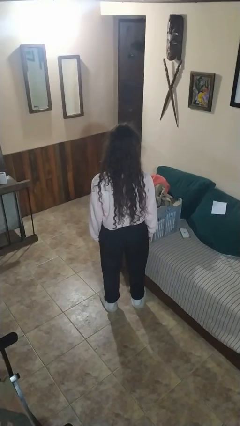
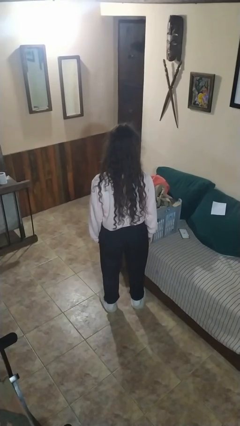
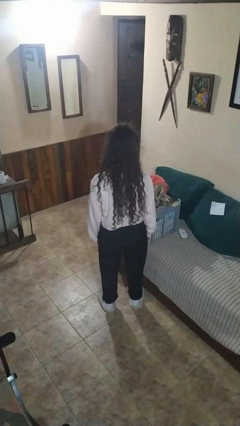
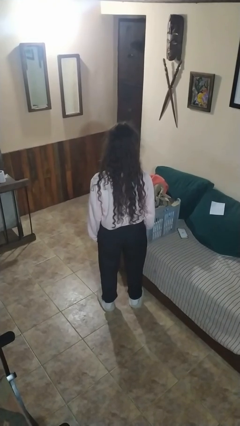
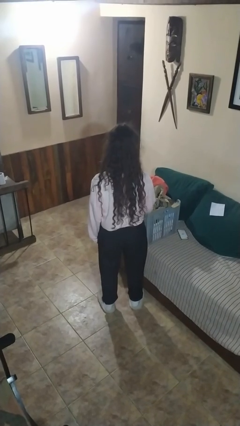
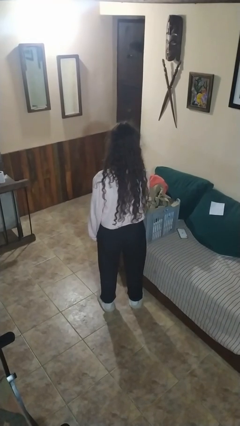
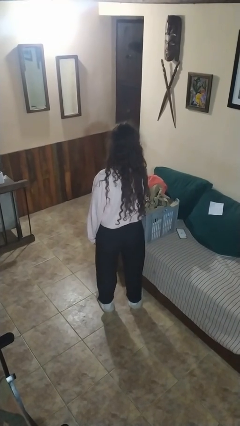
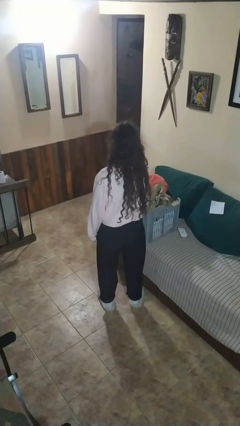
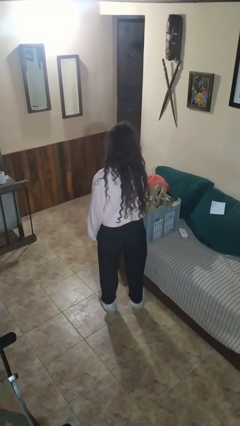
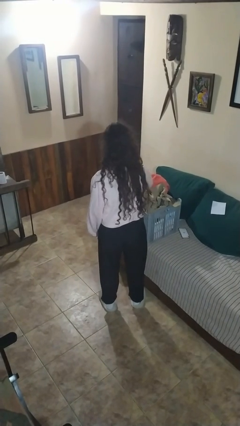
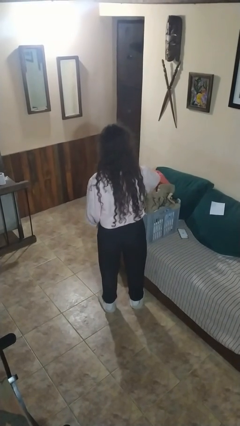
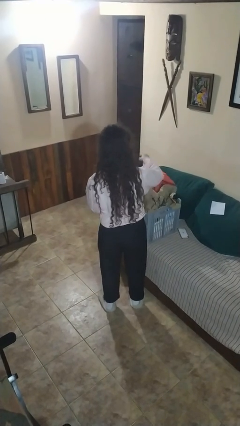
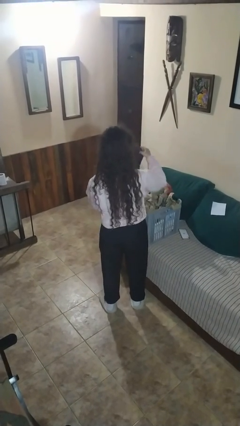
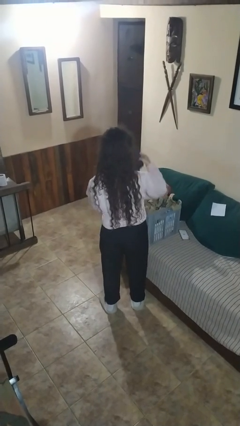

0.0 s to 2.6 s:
person takes object from basket

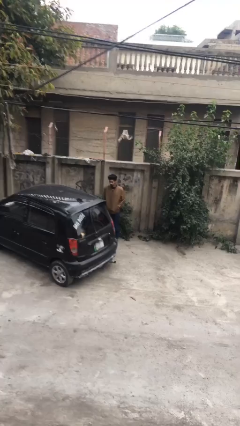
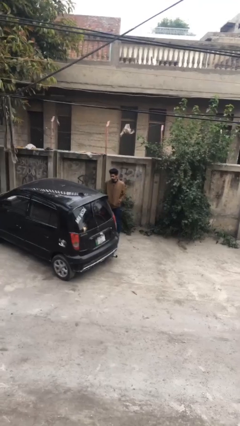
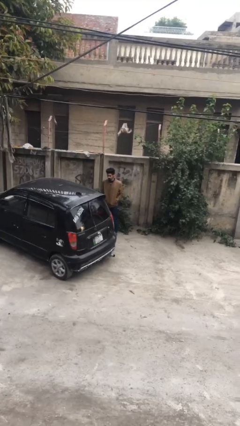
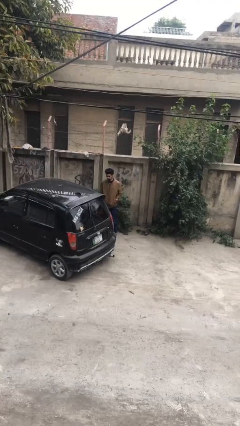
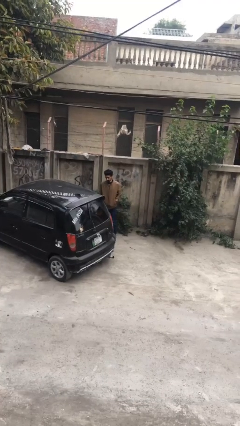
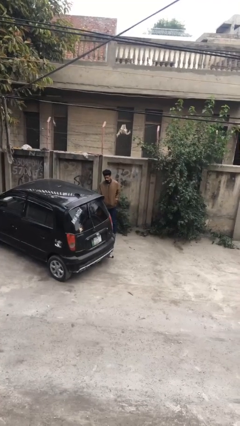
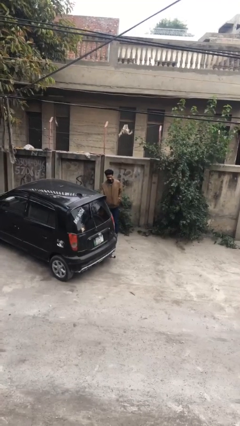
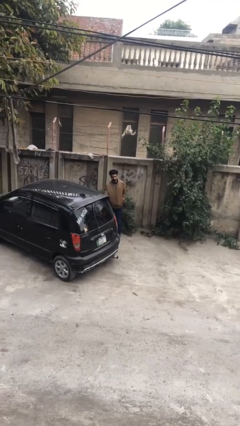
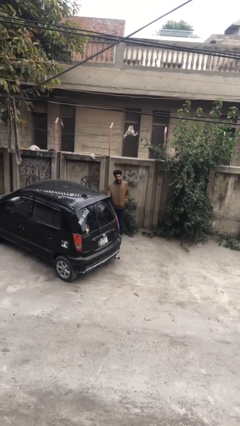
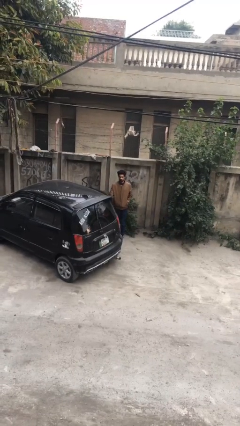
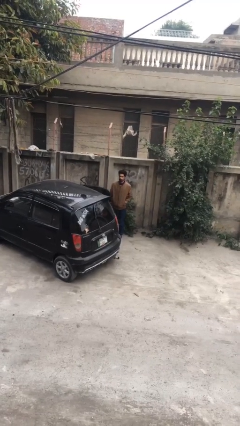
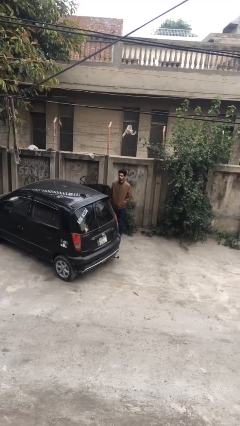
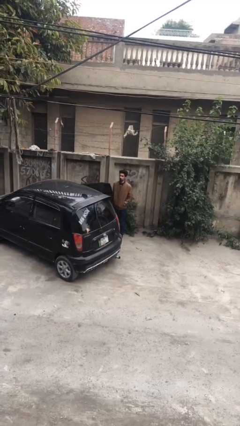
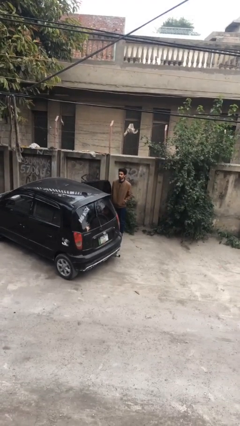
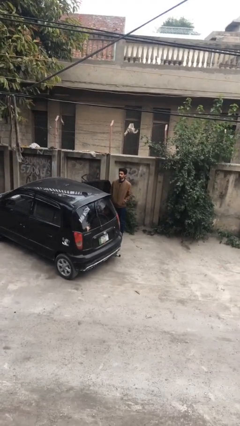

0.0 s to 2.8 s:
person opens car door

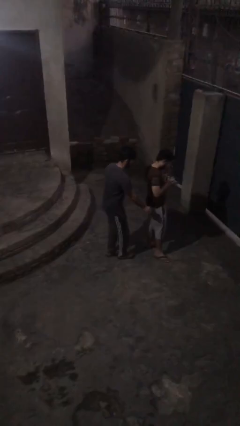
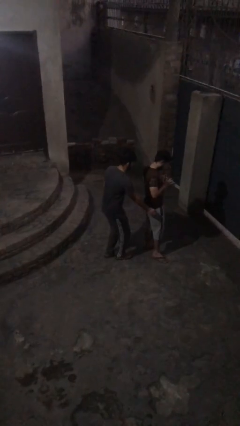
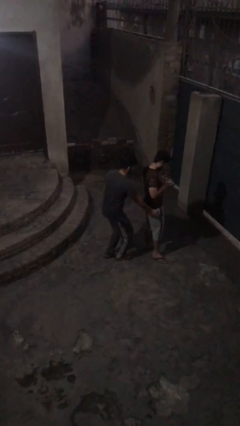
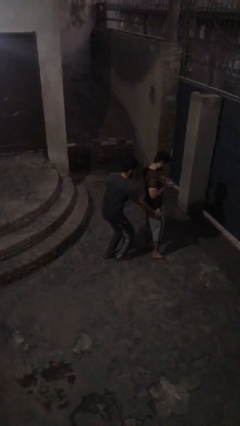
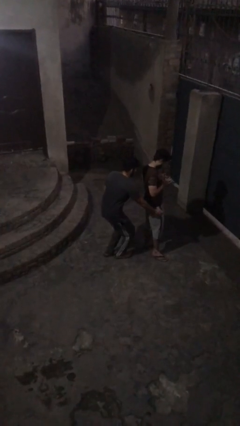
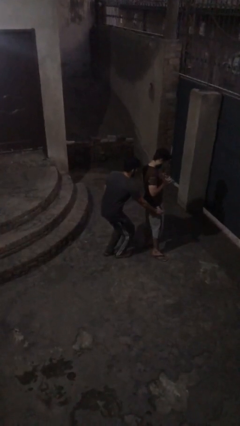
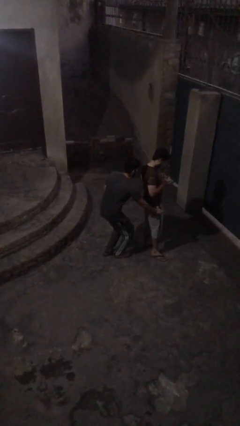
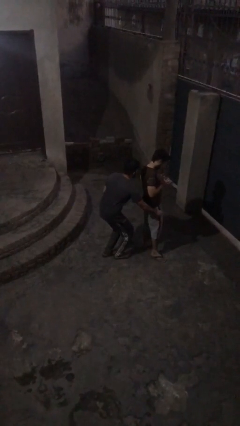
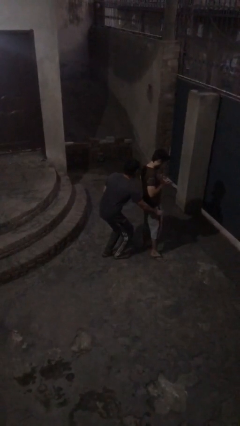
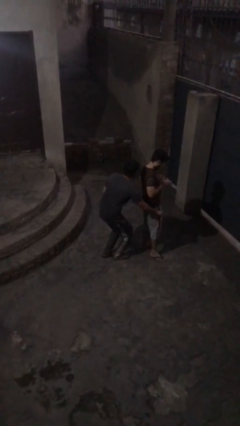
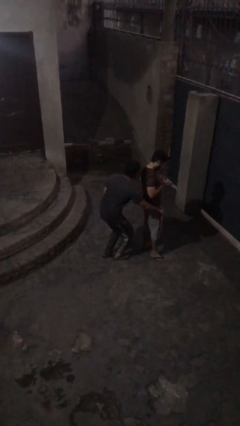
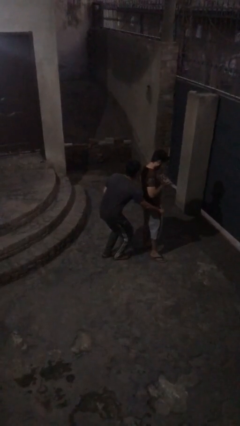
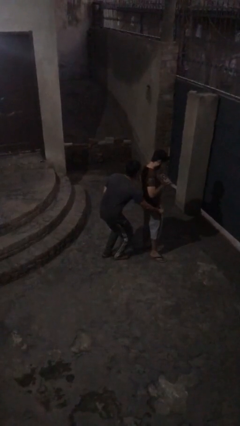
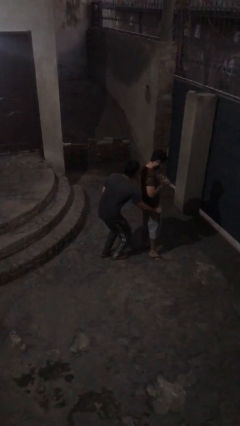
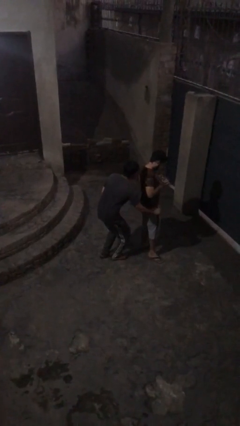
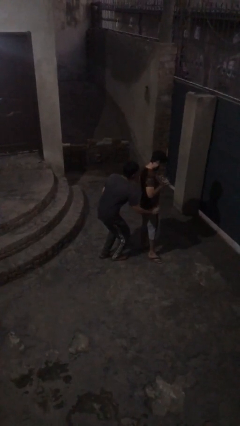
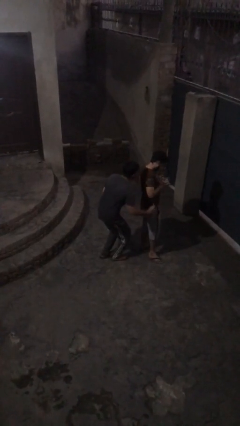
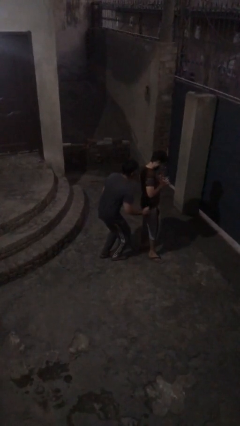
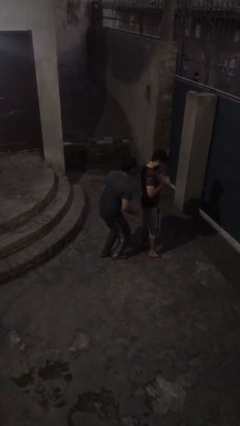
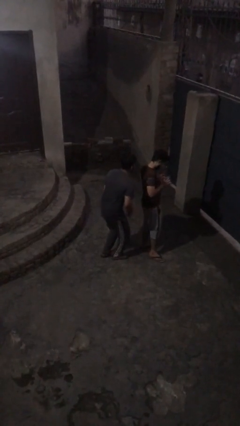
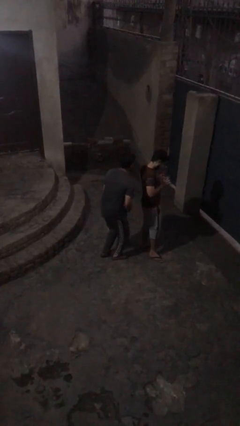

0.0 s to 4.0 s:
person steals object from person

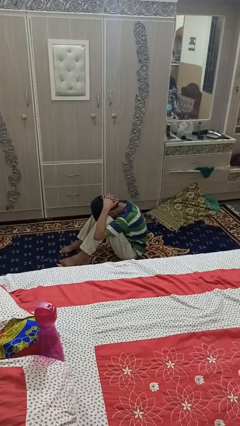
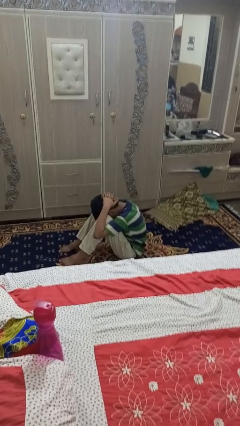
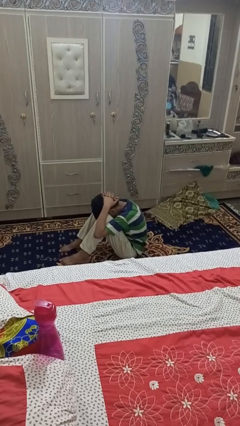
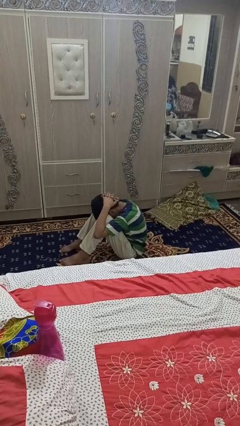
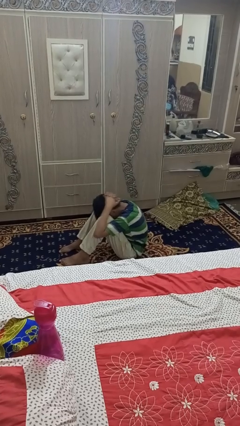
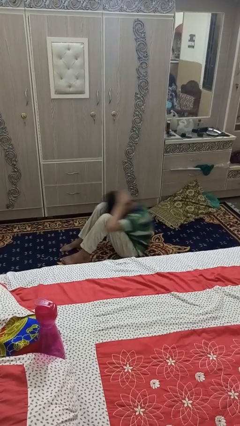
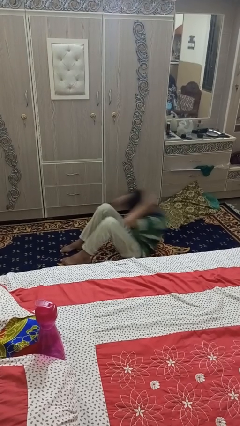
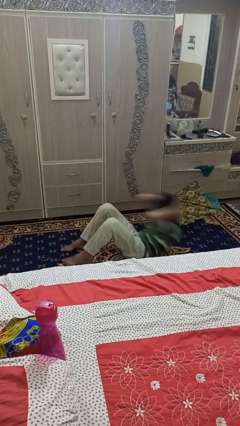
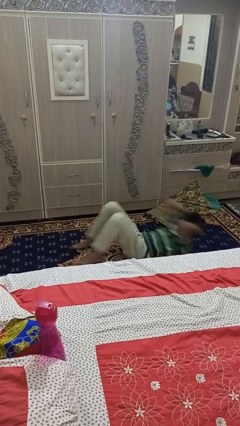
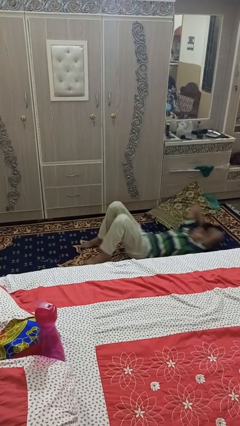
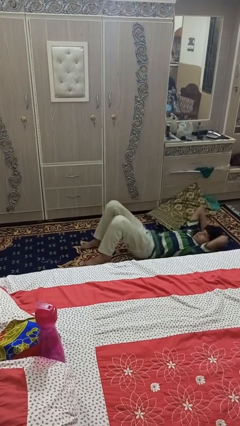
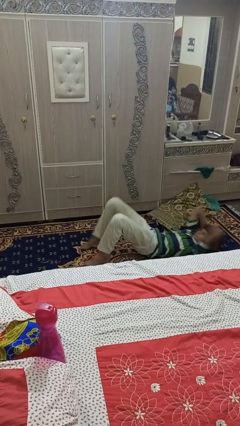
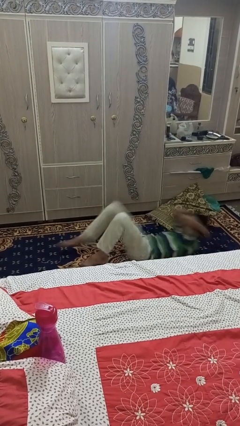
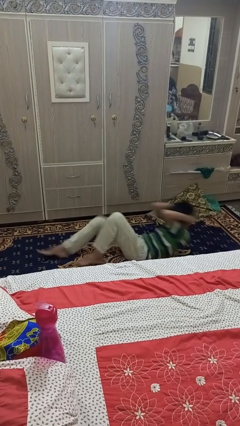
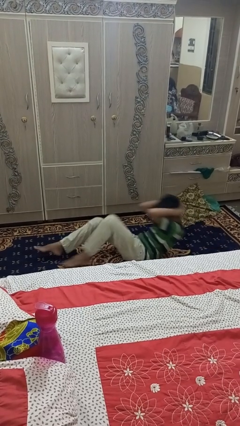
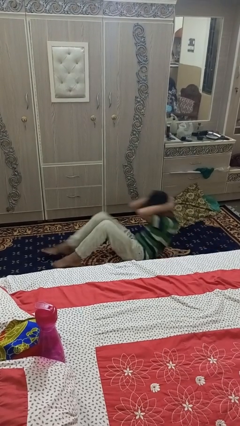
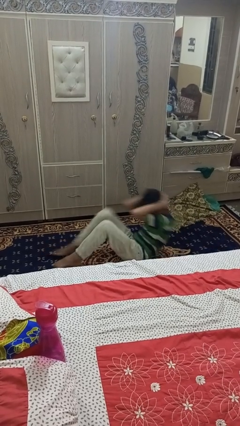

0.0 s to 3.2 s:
person exercises with situp

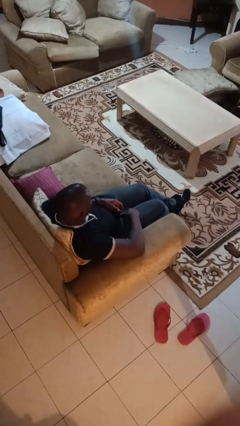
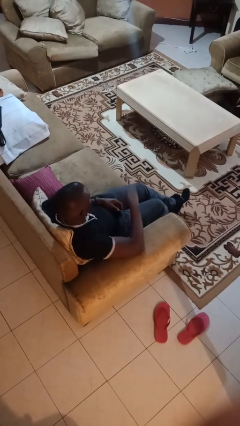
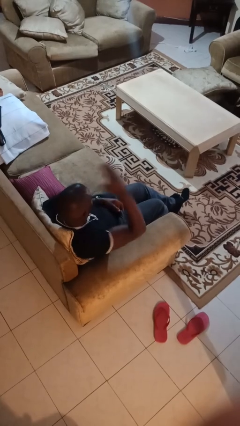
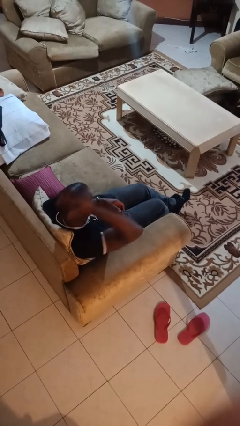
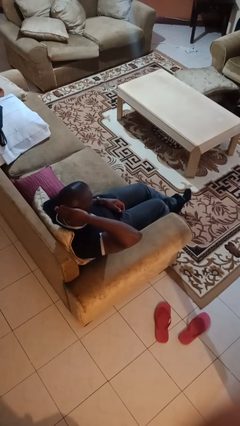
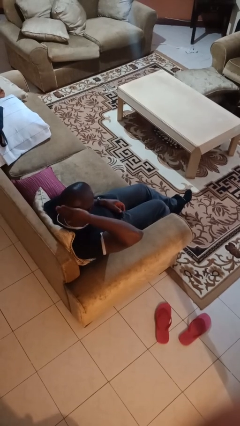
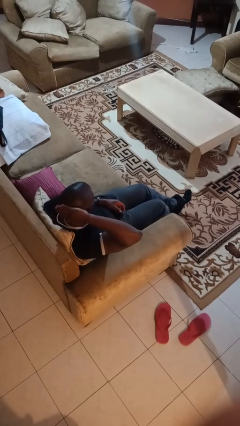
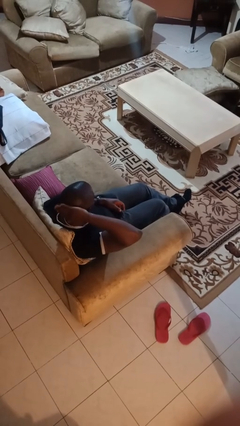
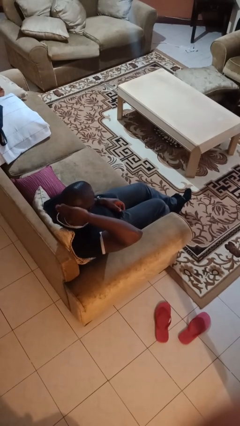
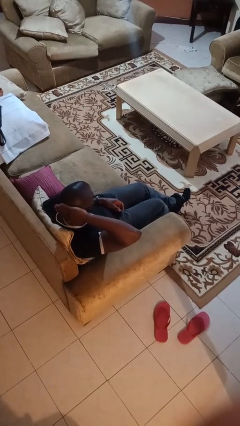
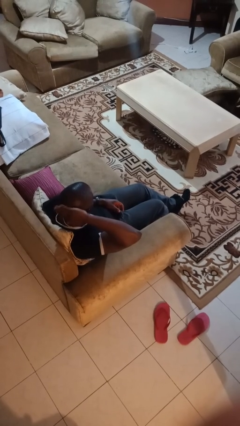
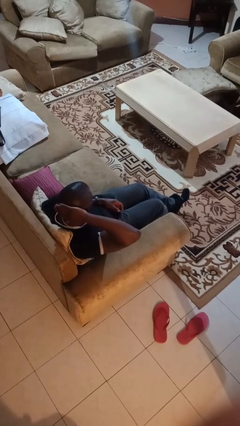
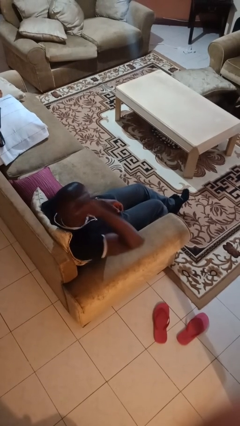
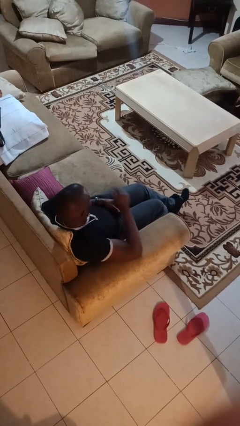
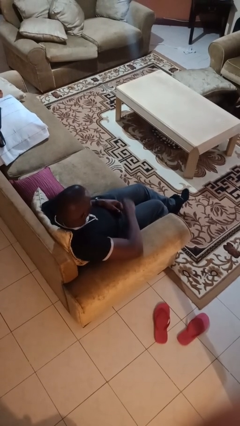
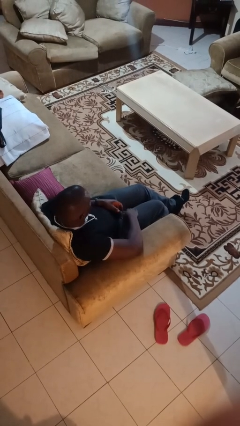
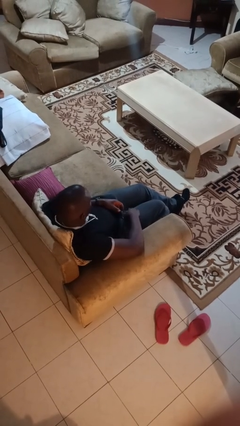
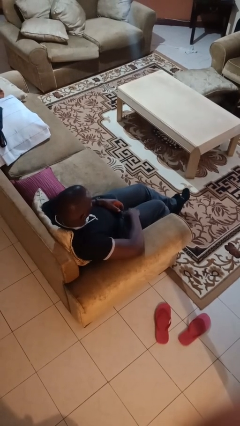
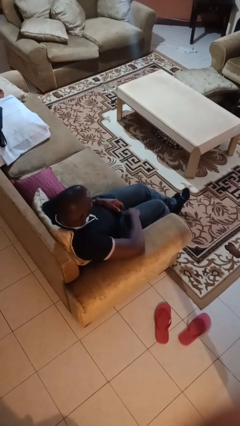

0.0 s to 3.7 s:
person pats head

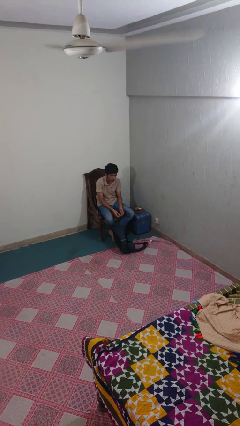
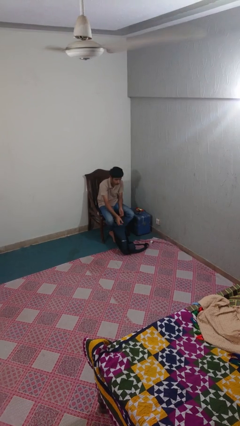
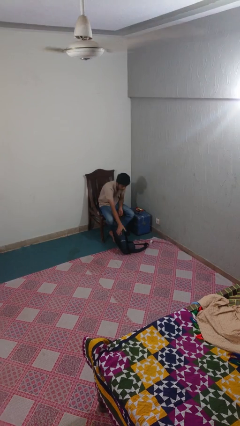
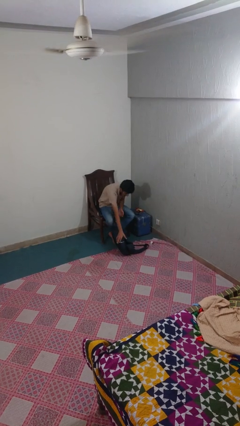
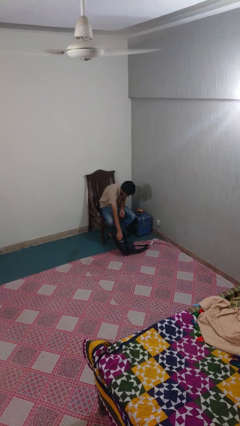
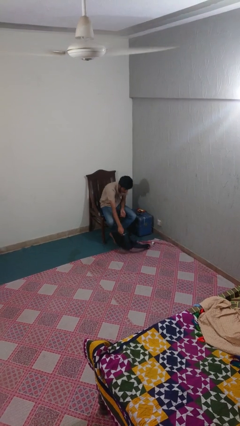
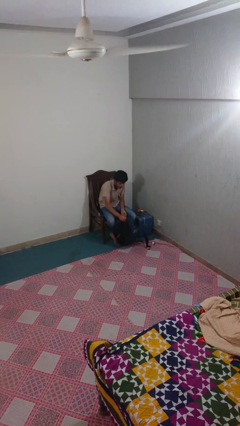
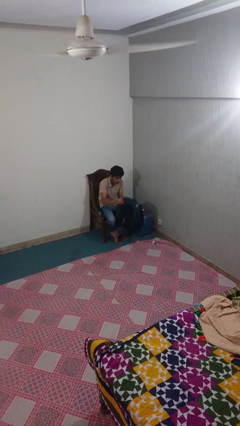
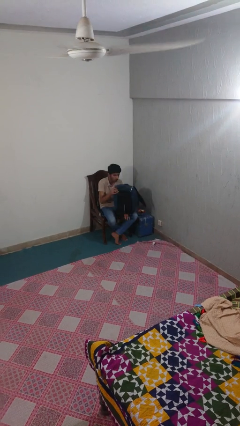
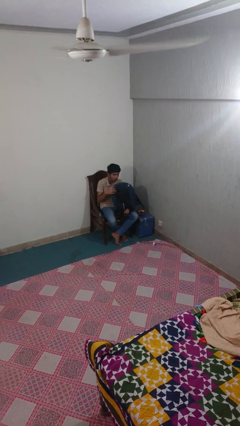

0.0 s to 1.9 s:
person picks up object from floor
